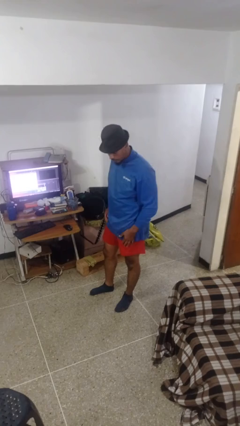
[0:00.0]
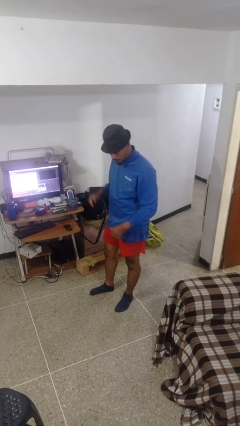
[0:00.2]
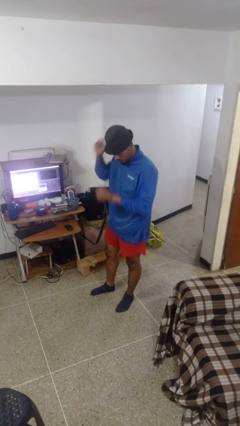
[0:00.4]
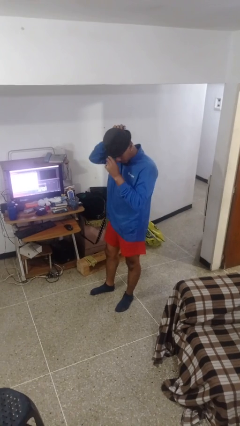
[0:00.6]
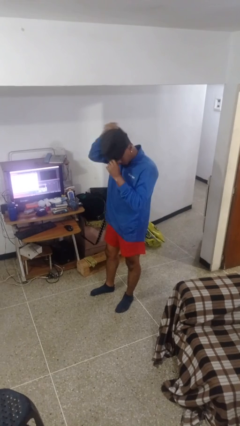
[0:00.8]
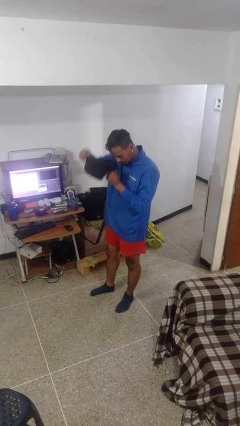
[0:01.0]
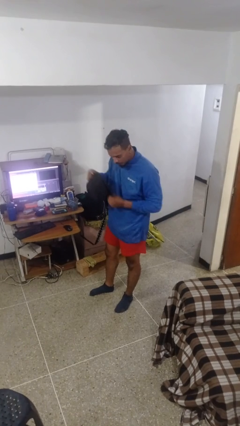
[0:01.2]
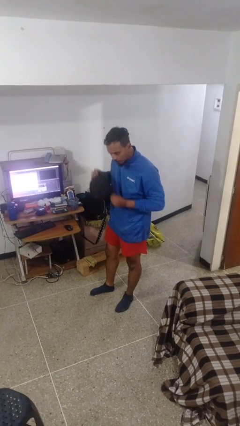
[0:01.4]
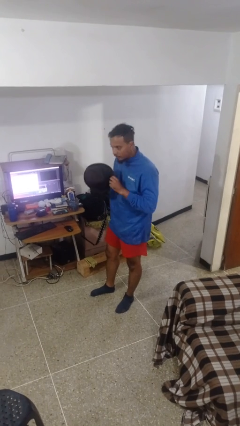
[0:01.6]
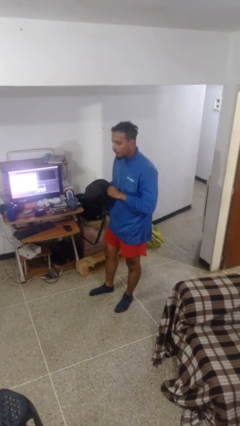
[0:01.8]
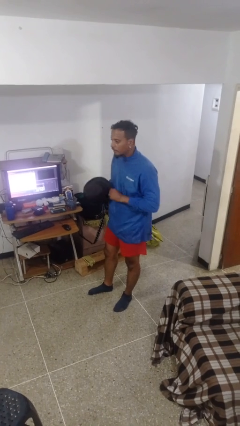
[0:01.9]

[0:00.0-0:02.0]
person takes off hat

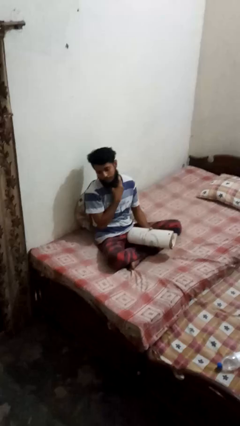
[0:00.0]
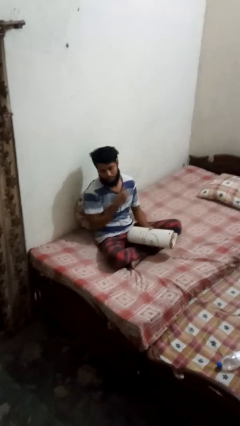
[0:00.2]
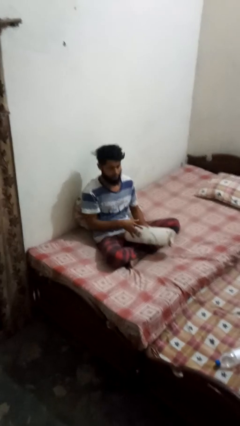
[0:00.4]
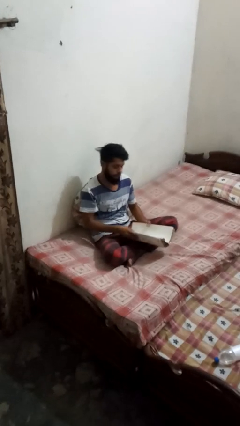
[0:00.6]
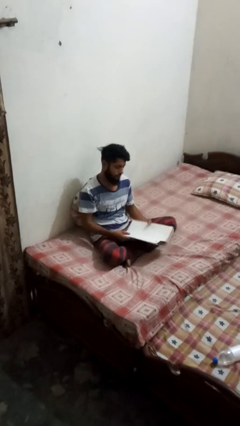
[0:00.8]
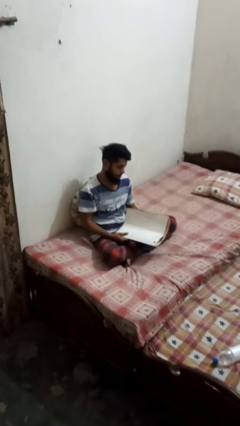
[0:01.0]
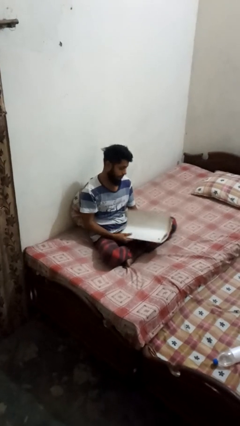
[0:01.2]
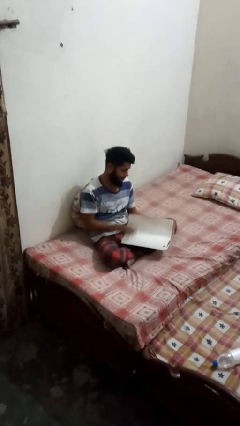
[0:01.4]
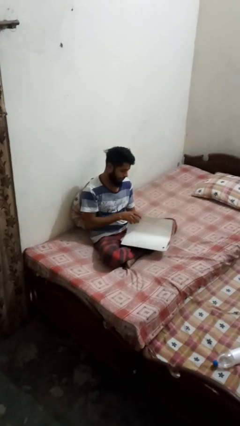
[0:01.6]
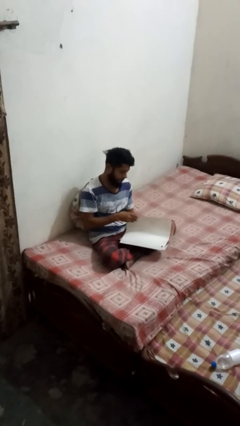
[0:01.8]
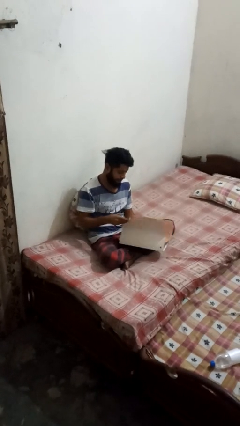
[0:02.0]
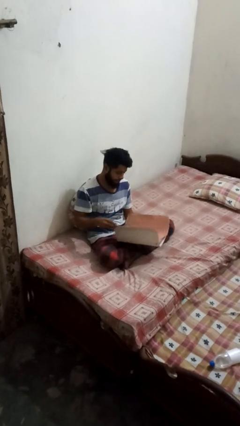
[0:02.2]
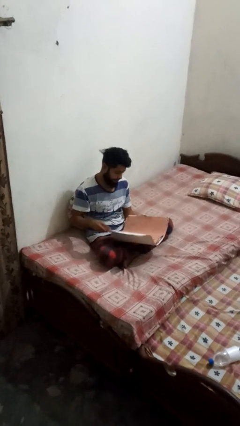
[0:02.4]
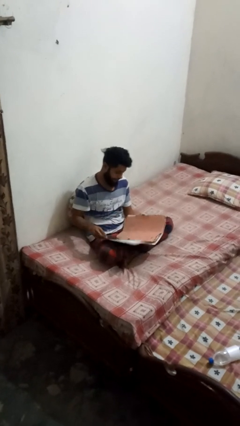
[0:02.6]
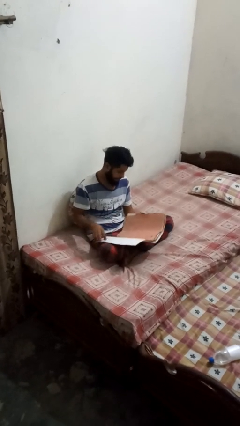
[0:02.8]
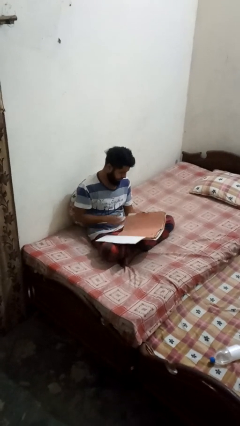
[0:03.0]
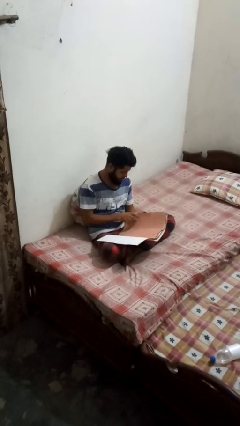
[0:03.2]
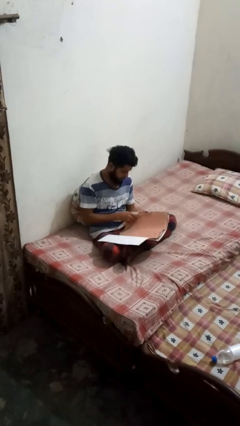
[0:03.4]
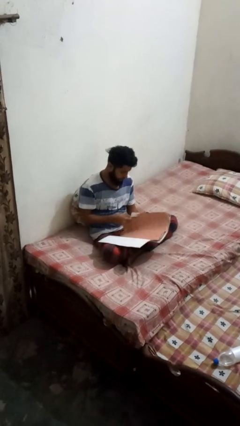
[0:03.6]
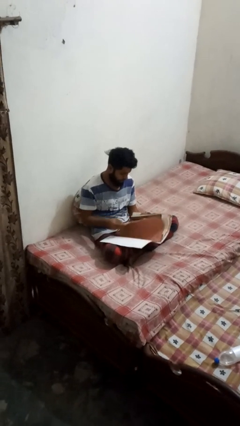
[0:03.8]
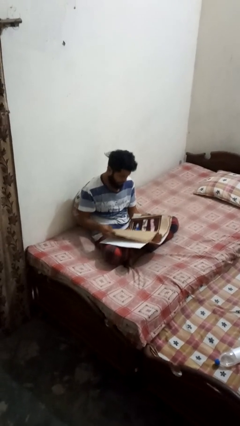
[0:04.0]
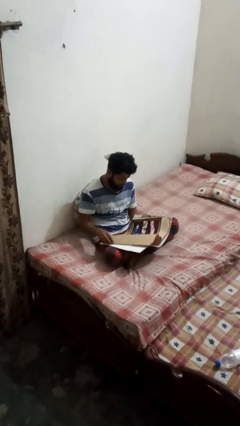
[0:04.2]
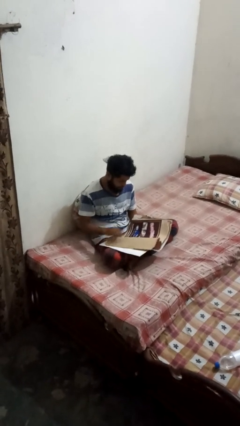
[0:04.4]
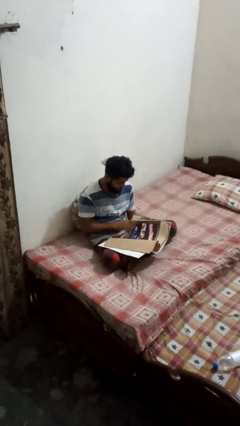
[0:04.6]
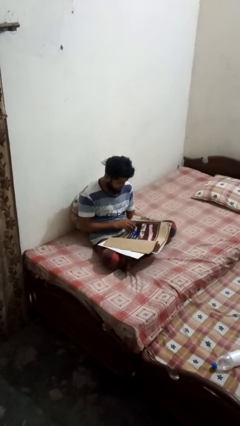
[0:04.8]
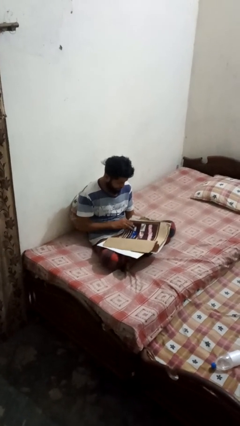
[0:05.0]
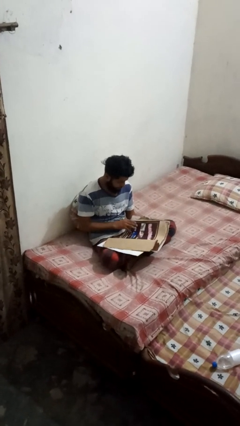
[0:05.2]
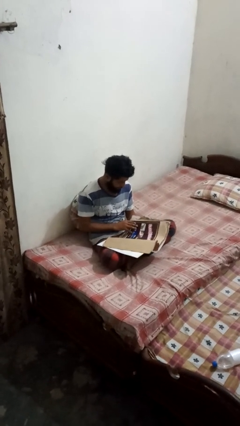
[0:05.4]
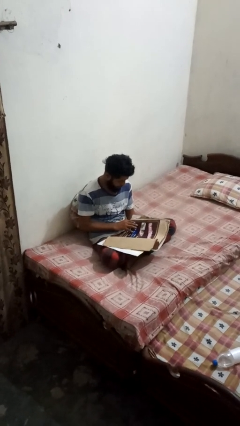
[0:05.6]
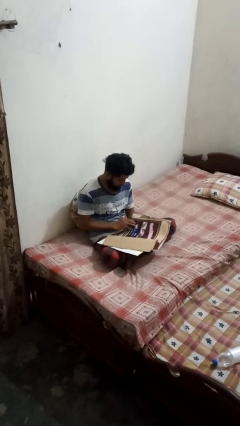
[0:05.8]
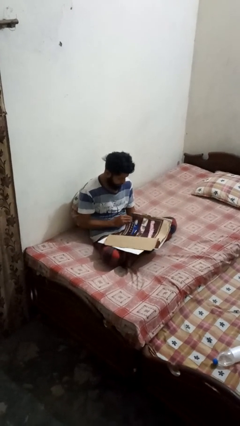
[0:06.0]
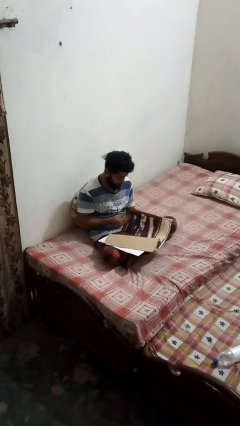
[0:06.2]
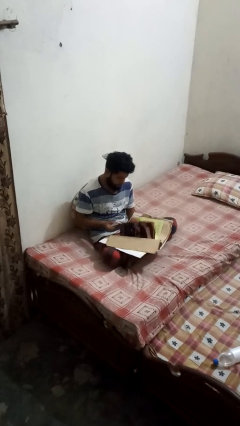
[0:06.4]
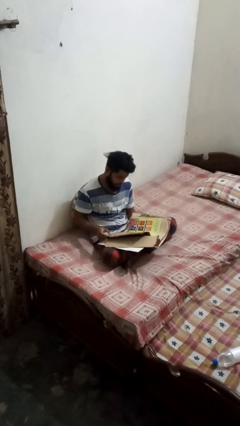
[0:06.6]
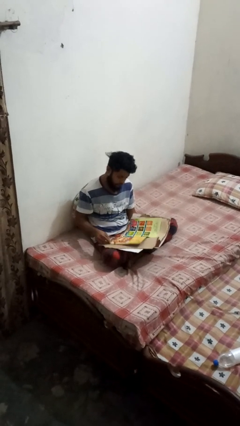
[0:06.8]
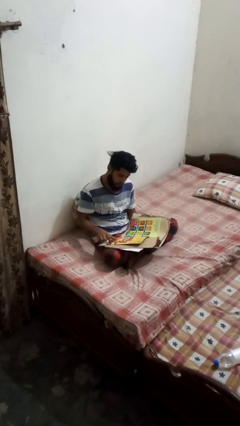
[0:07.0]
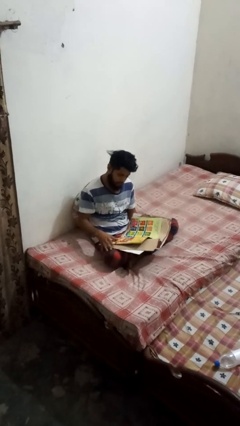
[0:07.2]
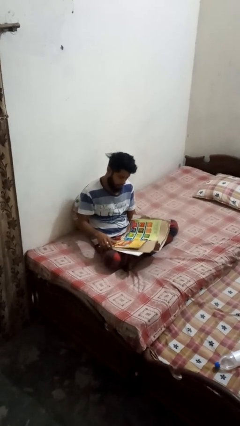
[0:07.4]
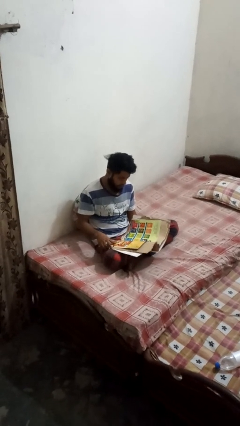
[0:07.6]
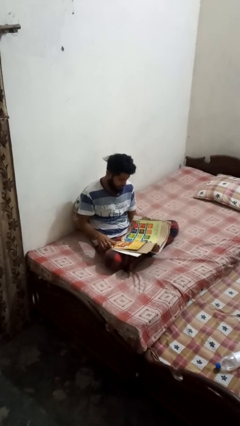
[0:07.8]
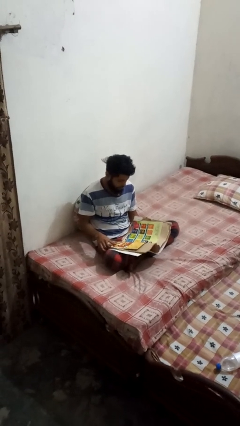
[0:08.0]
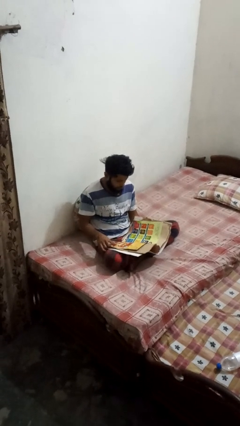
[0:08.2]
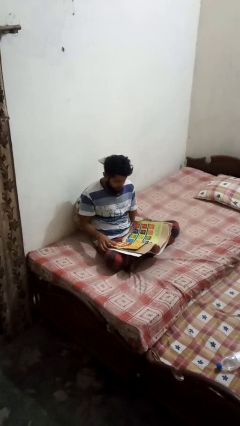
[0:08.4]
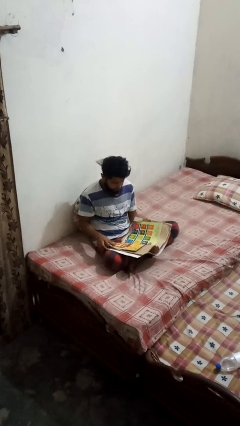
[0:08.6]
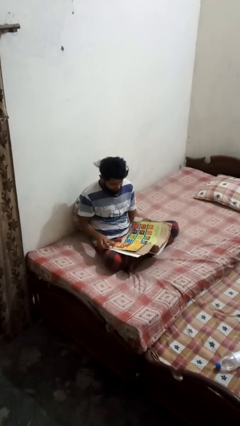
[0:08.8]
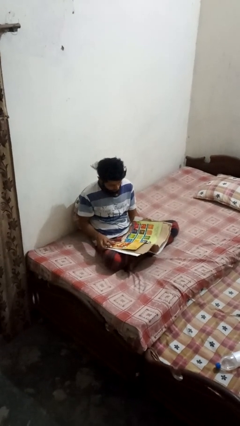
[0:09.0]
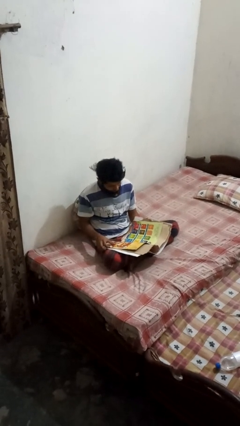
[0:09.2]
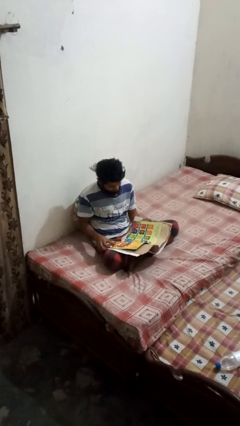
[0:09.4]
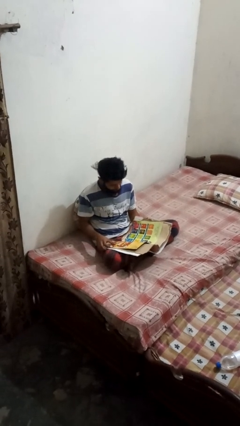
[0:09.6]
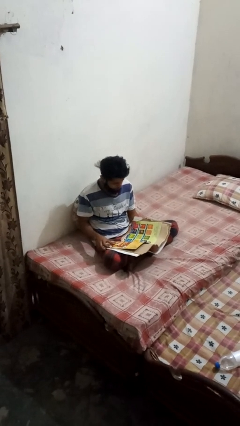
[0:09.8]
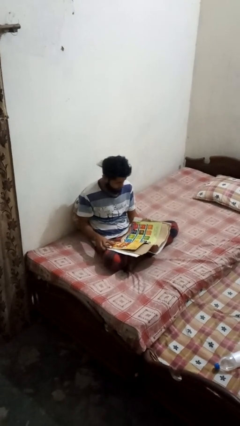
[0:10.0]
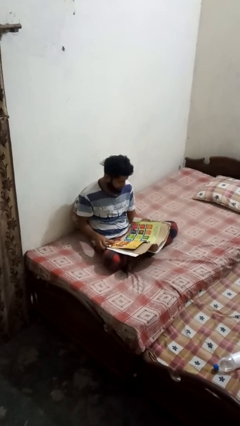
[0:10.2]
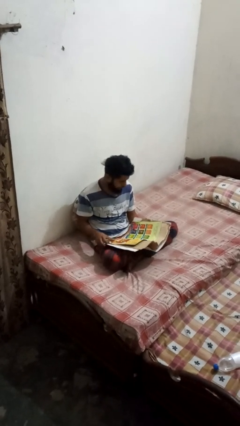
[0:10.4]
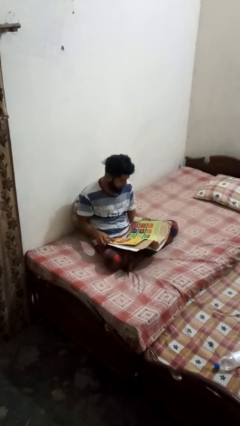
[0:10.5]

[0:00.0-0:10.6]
person reads magazine

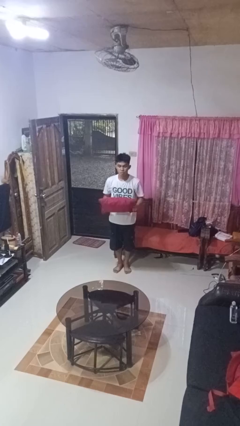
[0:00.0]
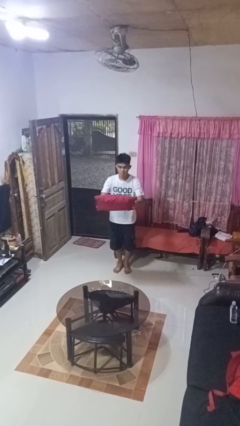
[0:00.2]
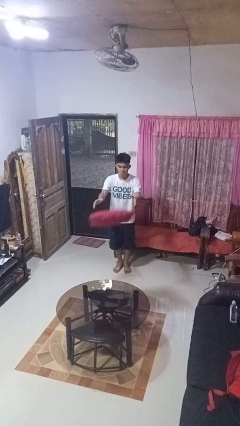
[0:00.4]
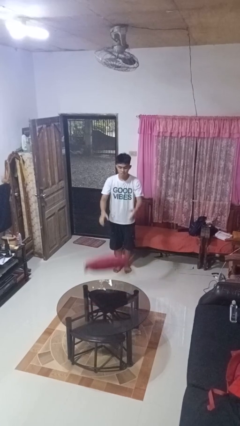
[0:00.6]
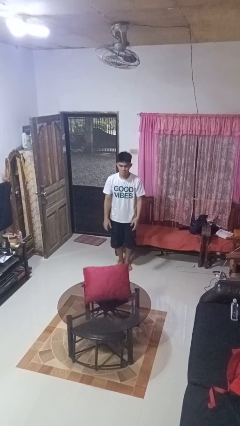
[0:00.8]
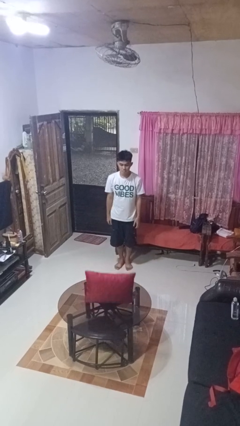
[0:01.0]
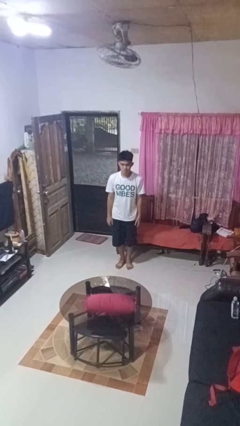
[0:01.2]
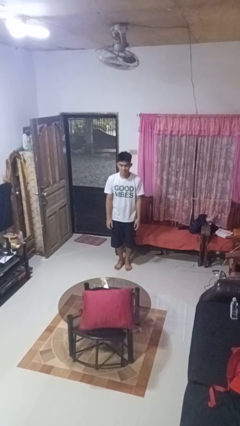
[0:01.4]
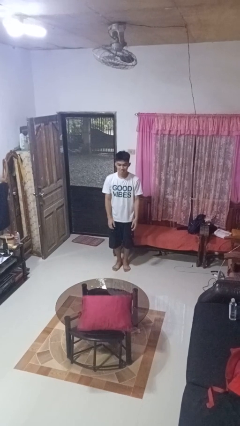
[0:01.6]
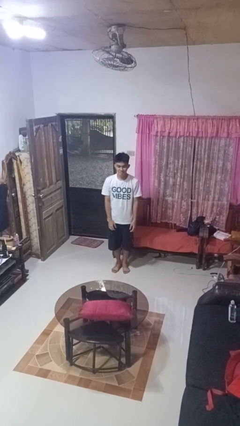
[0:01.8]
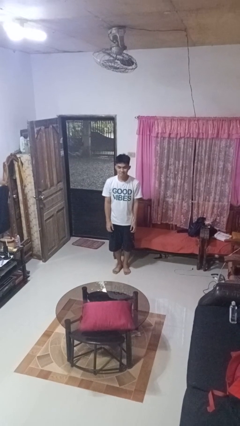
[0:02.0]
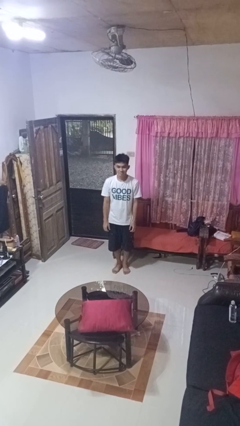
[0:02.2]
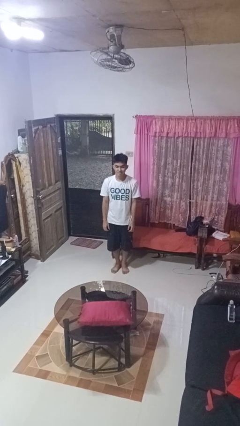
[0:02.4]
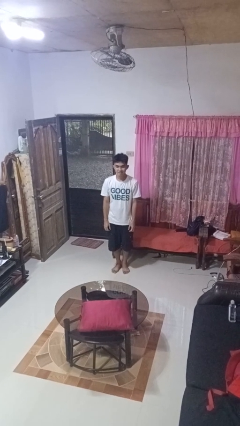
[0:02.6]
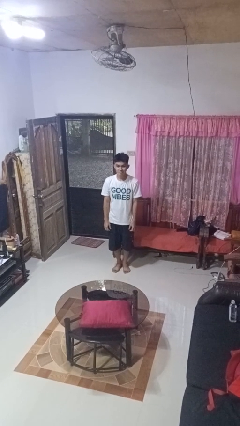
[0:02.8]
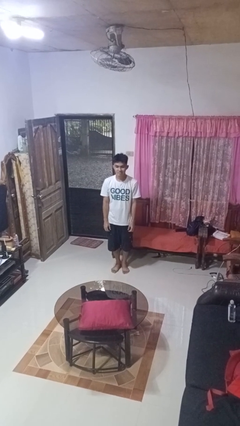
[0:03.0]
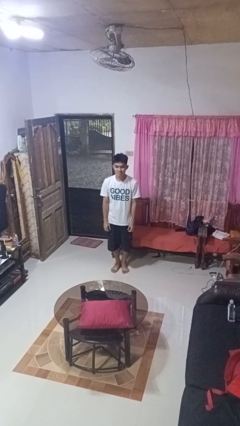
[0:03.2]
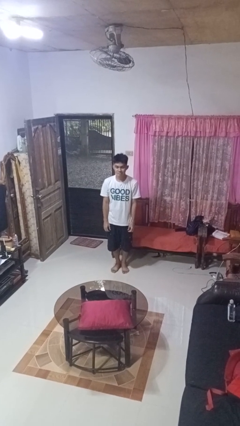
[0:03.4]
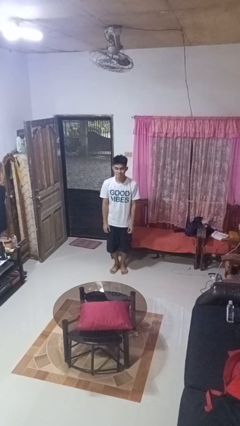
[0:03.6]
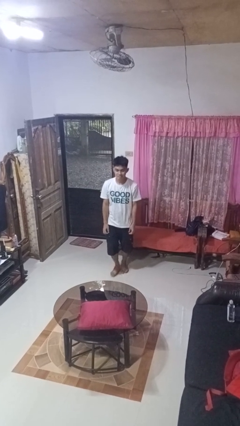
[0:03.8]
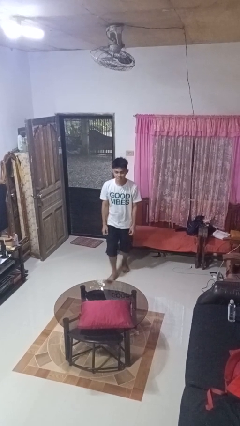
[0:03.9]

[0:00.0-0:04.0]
person throws object on table

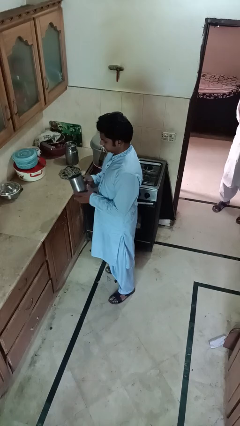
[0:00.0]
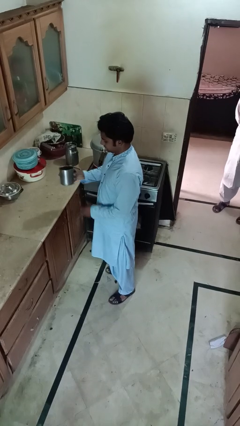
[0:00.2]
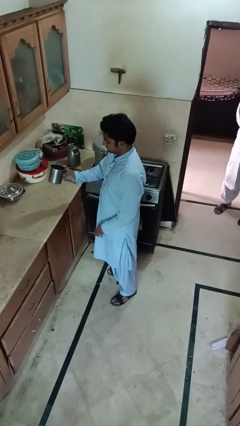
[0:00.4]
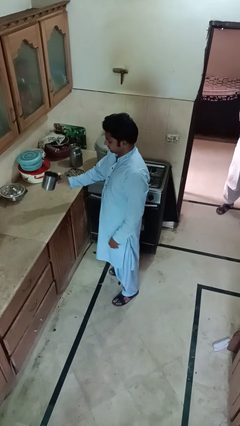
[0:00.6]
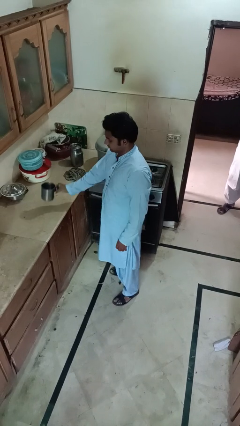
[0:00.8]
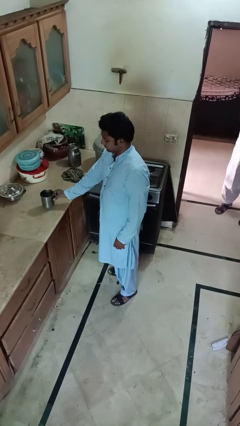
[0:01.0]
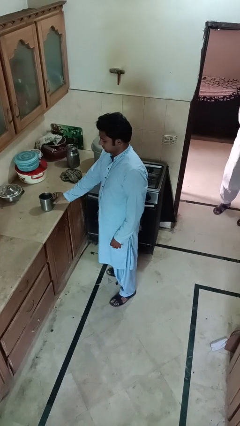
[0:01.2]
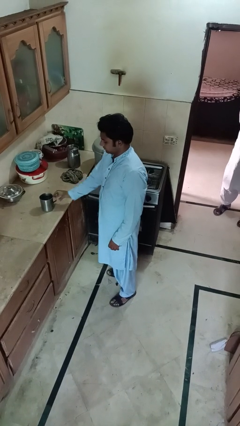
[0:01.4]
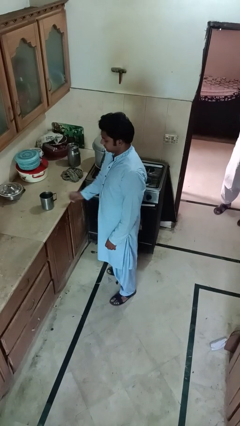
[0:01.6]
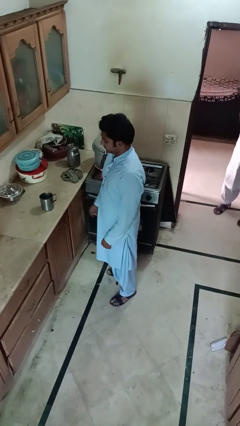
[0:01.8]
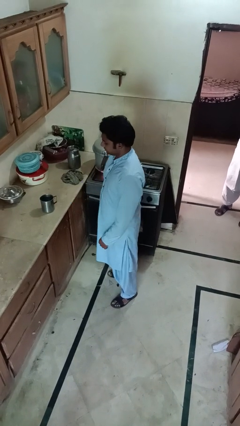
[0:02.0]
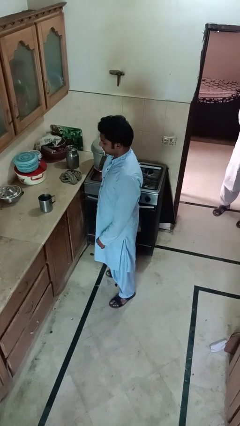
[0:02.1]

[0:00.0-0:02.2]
person puts down object on countertop
